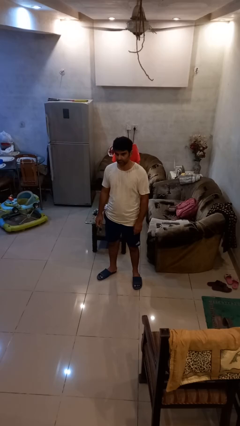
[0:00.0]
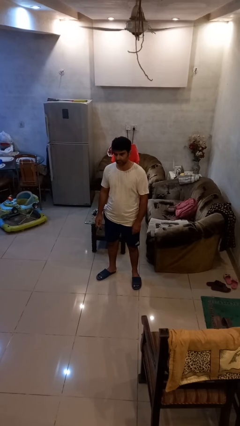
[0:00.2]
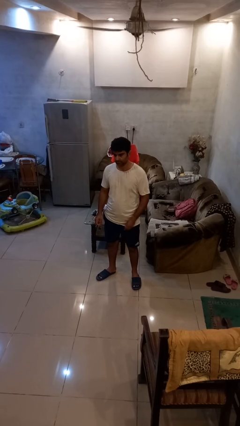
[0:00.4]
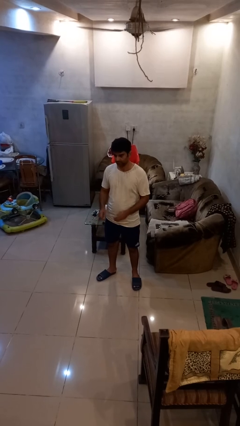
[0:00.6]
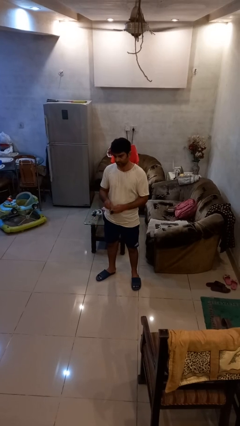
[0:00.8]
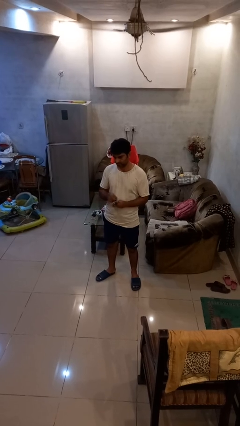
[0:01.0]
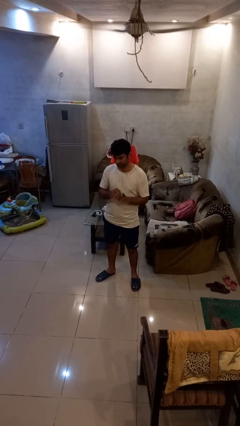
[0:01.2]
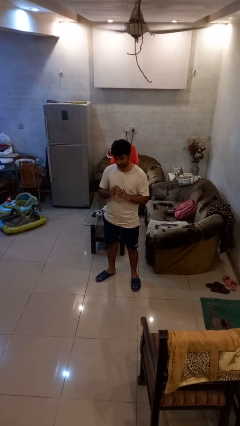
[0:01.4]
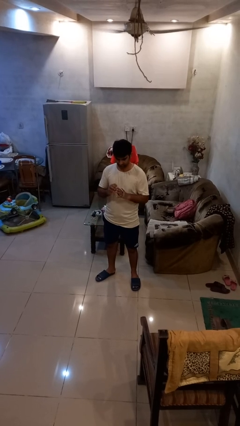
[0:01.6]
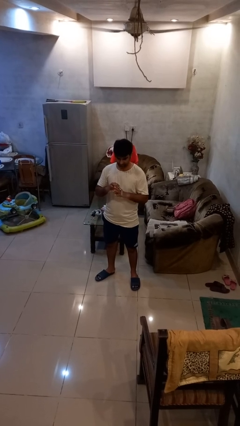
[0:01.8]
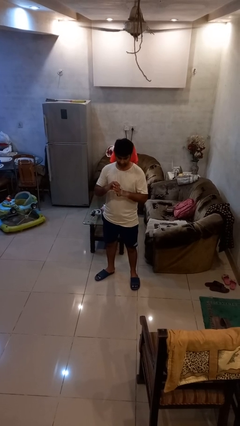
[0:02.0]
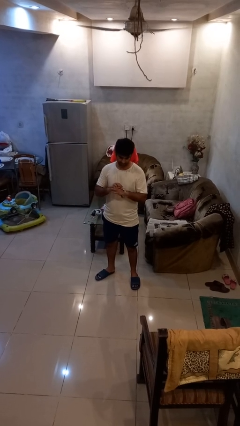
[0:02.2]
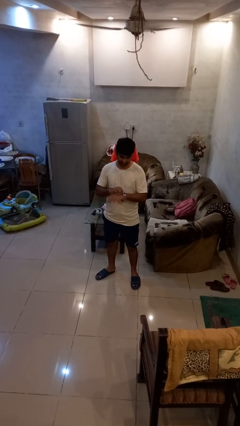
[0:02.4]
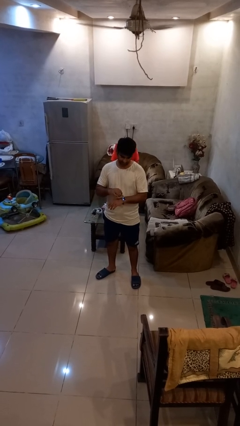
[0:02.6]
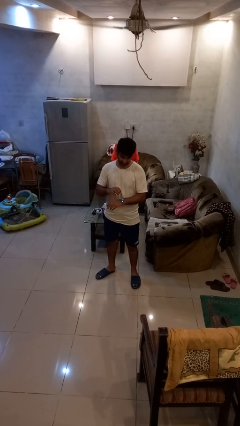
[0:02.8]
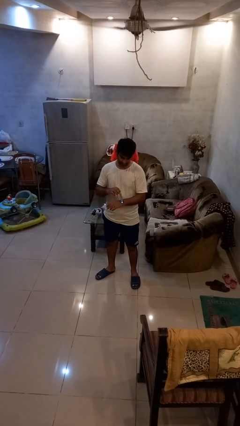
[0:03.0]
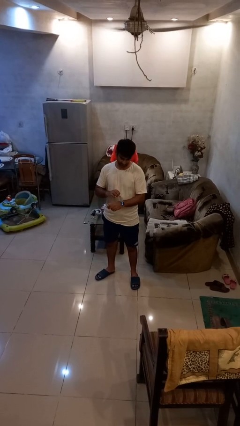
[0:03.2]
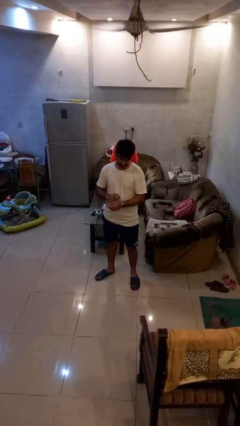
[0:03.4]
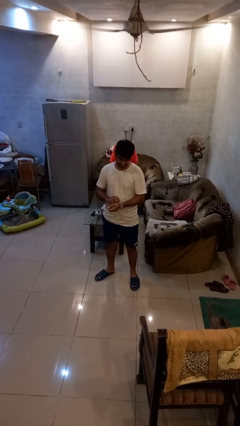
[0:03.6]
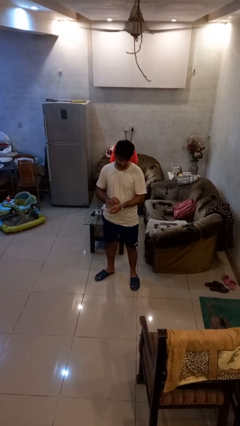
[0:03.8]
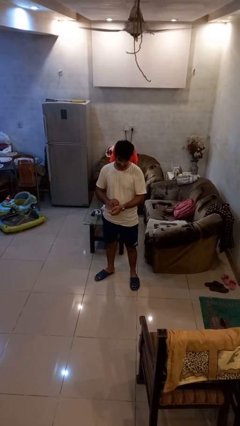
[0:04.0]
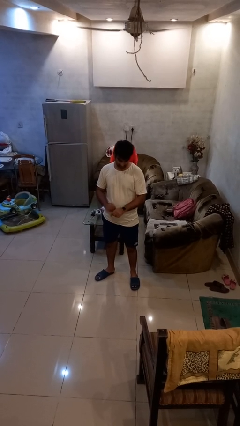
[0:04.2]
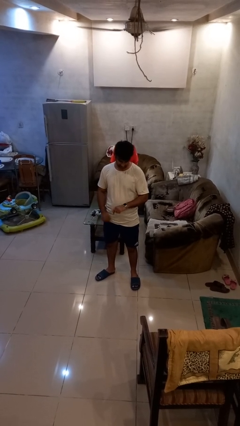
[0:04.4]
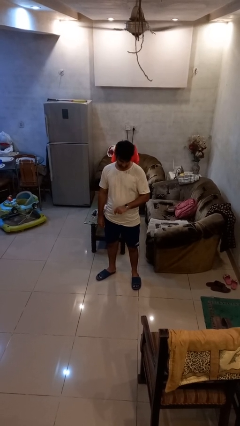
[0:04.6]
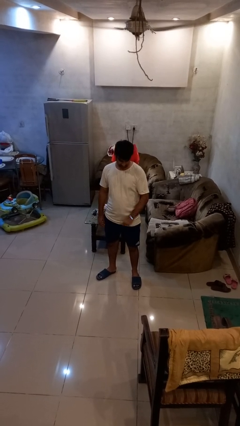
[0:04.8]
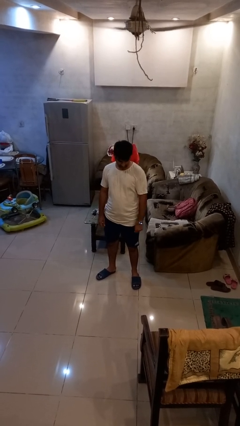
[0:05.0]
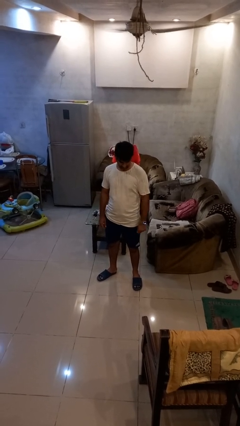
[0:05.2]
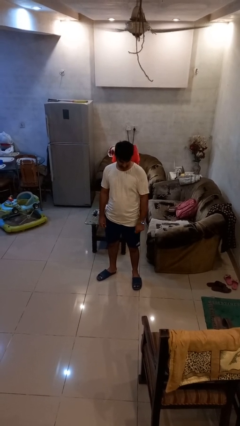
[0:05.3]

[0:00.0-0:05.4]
person puts on wristwatch

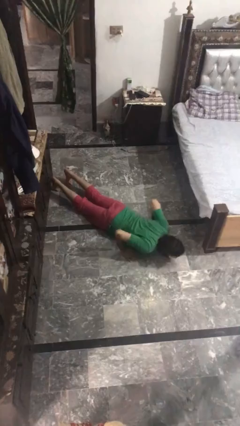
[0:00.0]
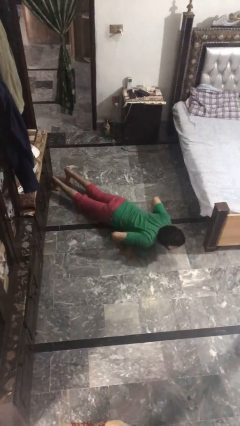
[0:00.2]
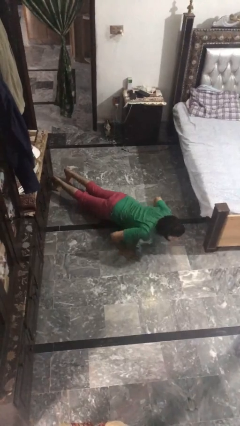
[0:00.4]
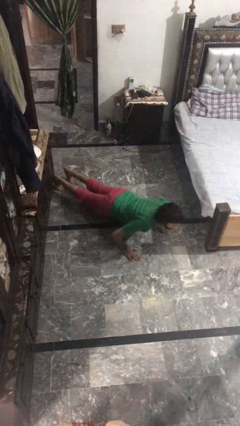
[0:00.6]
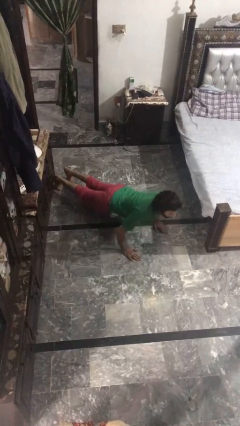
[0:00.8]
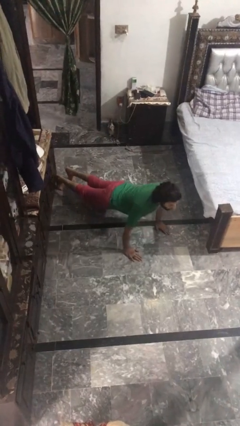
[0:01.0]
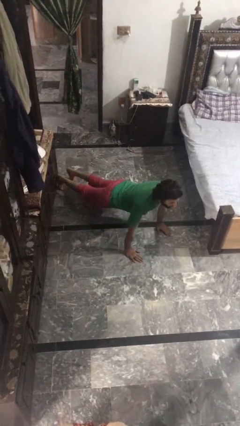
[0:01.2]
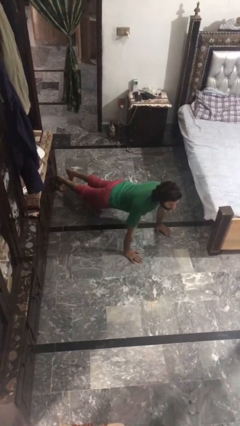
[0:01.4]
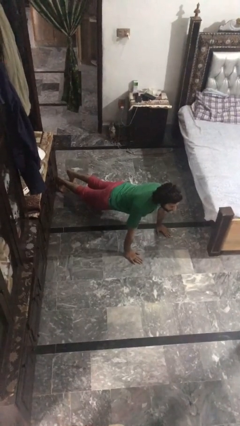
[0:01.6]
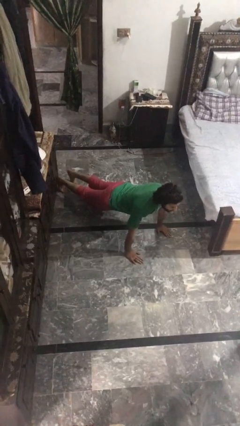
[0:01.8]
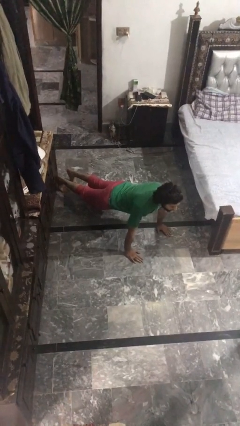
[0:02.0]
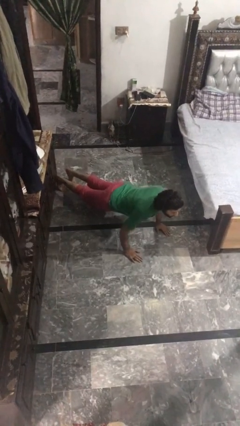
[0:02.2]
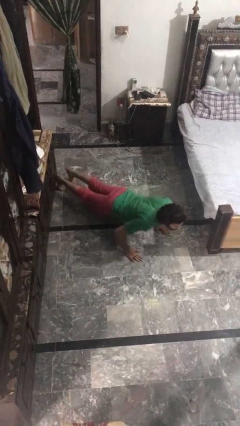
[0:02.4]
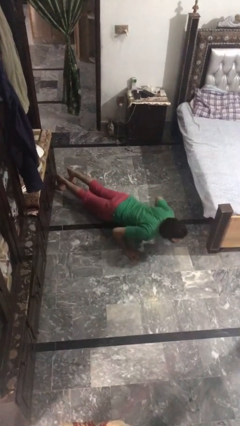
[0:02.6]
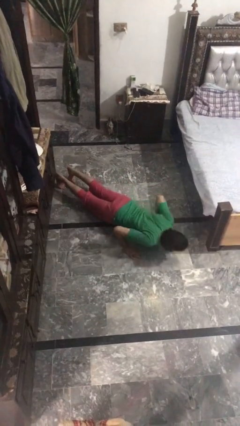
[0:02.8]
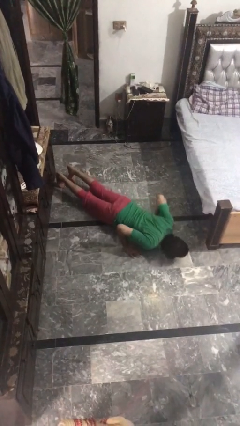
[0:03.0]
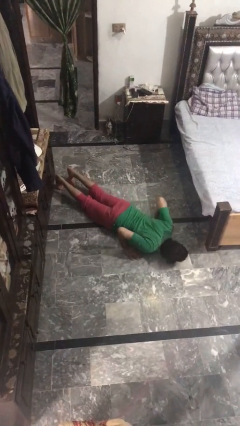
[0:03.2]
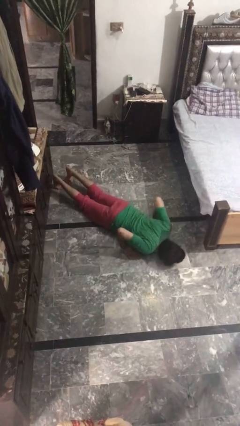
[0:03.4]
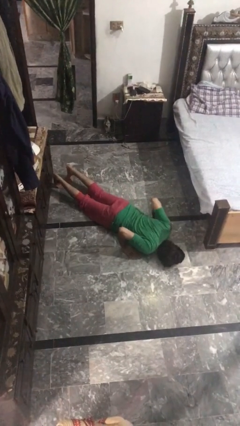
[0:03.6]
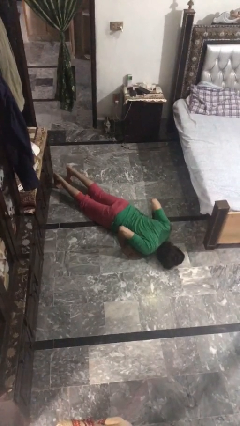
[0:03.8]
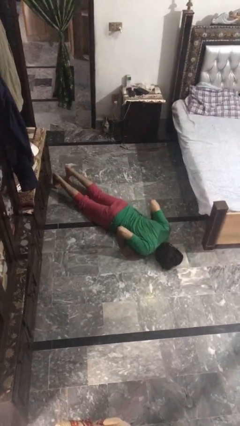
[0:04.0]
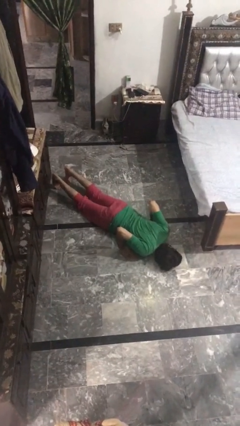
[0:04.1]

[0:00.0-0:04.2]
person exercises with pushup

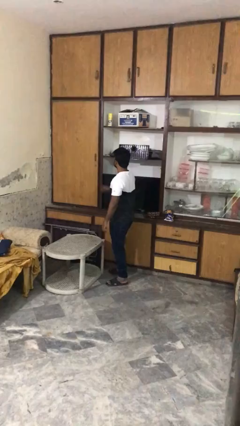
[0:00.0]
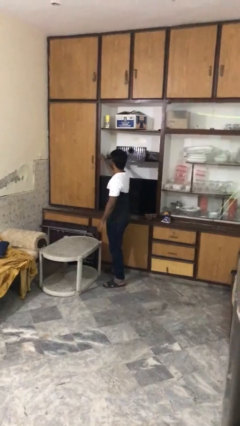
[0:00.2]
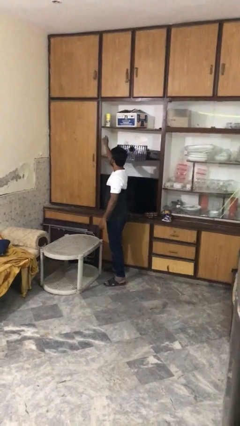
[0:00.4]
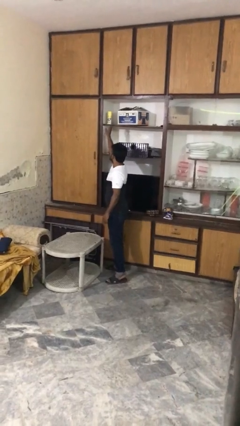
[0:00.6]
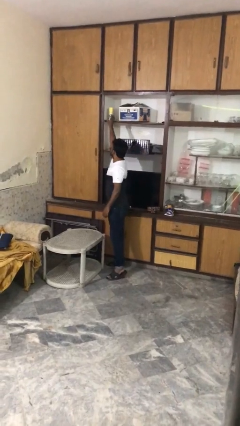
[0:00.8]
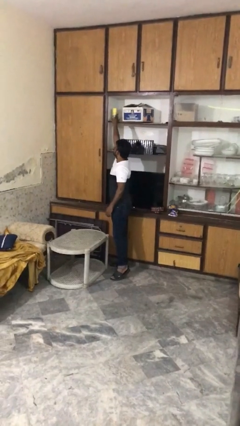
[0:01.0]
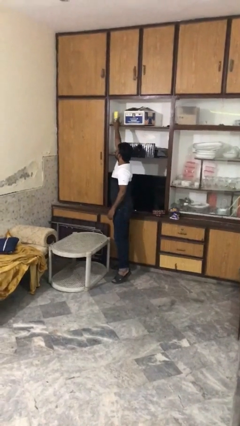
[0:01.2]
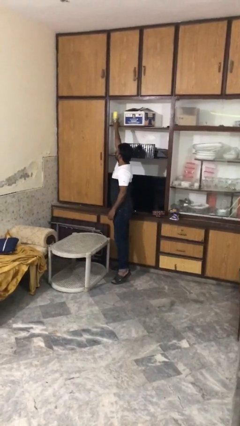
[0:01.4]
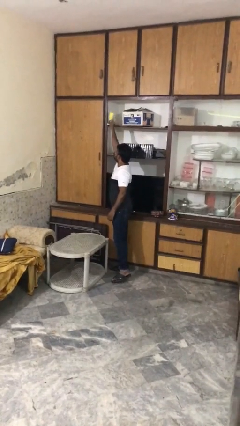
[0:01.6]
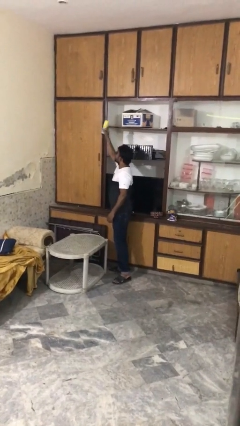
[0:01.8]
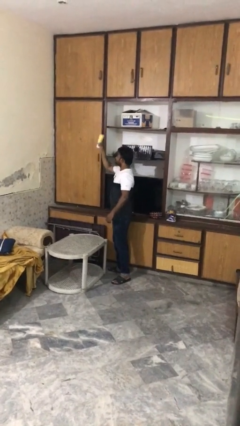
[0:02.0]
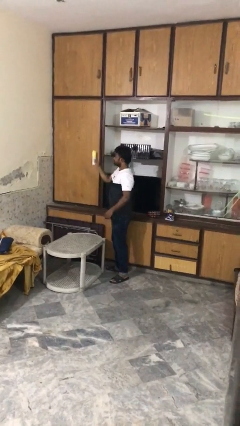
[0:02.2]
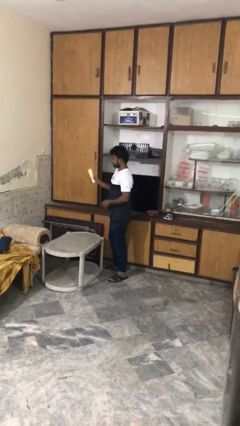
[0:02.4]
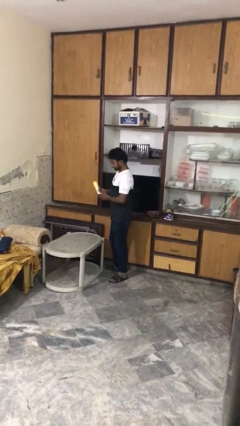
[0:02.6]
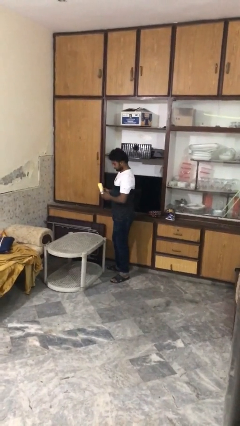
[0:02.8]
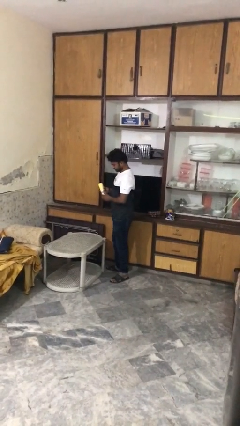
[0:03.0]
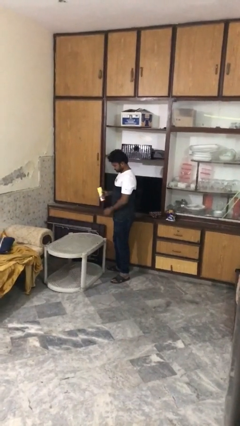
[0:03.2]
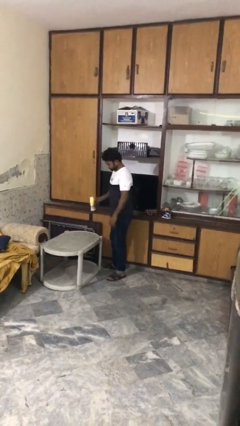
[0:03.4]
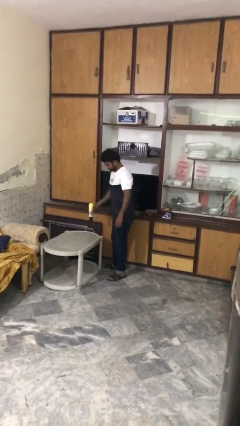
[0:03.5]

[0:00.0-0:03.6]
person picks up object from shelf

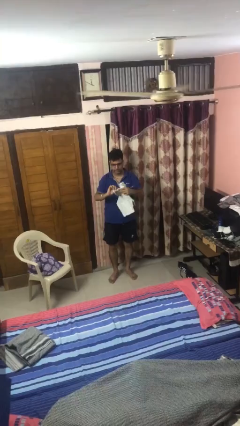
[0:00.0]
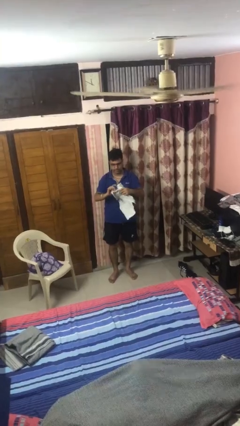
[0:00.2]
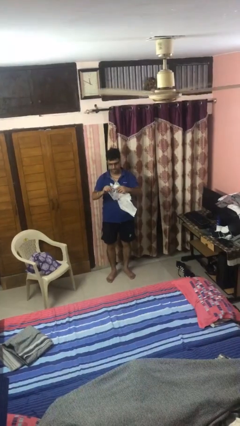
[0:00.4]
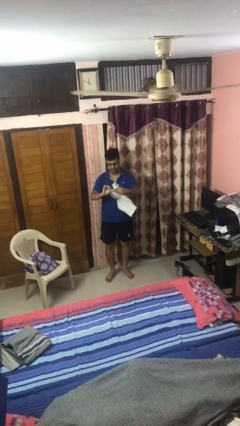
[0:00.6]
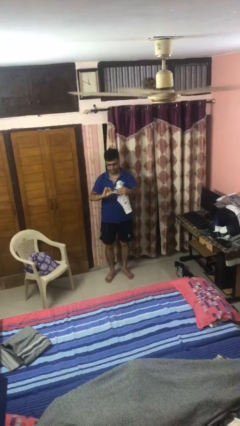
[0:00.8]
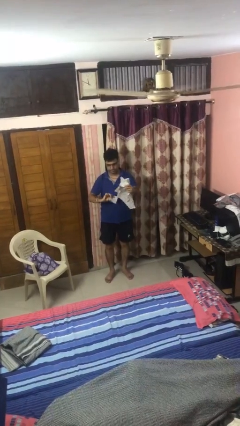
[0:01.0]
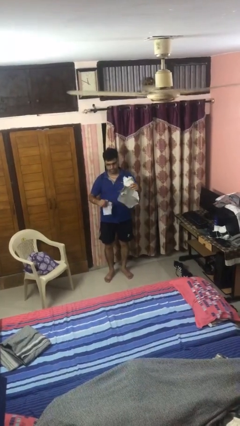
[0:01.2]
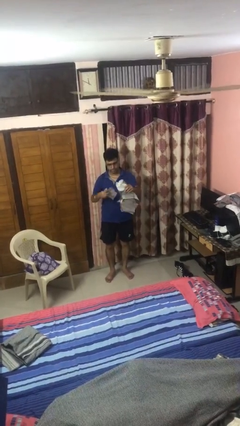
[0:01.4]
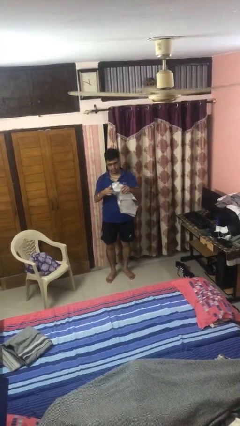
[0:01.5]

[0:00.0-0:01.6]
person tears paper

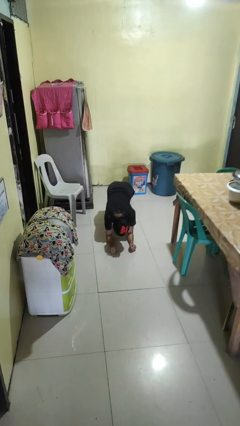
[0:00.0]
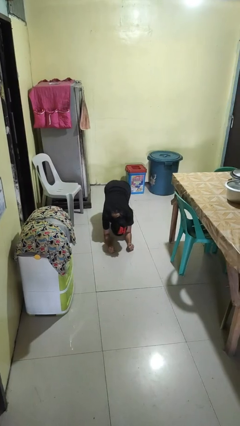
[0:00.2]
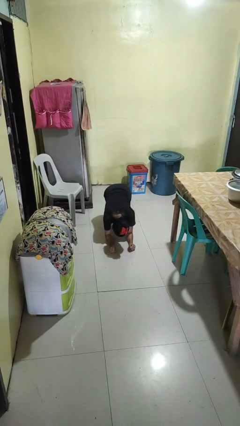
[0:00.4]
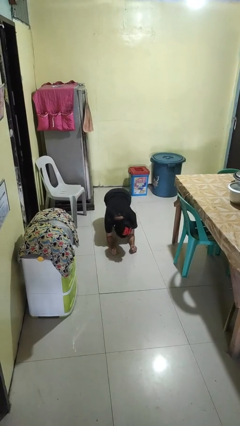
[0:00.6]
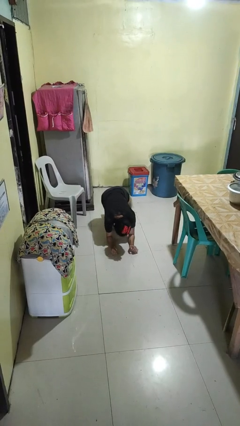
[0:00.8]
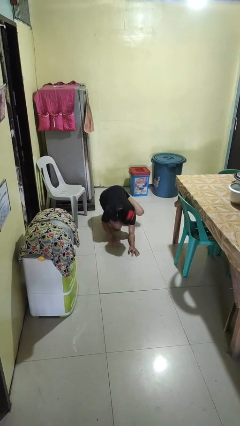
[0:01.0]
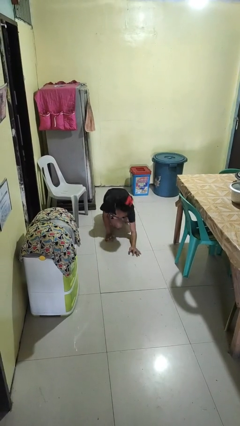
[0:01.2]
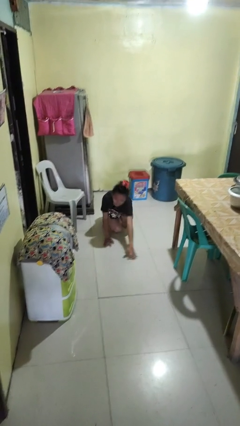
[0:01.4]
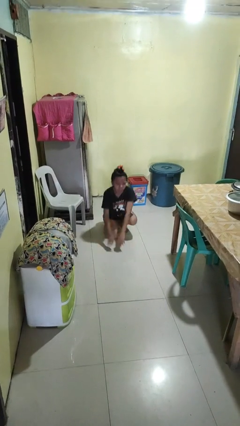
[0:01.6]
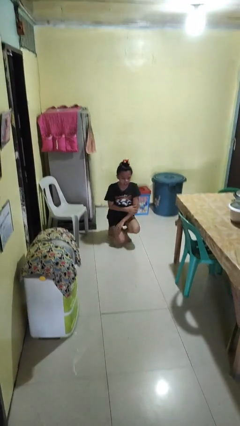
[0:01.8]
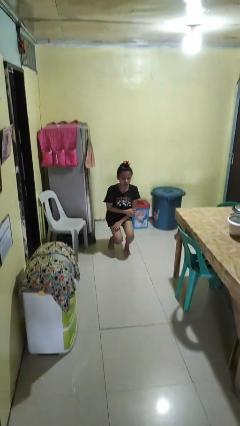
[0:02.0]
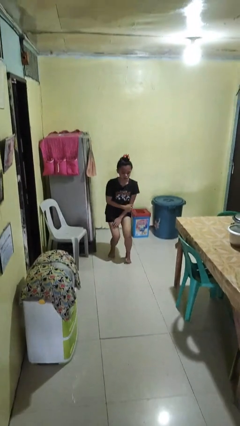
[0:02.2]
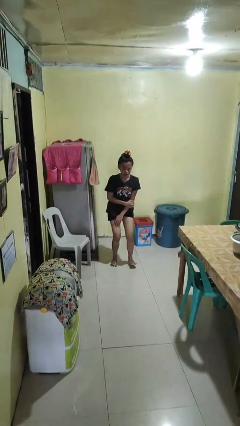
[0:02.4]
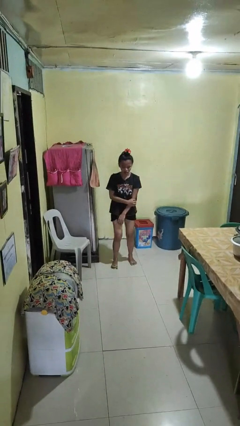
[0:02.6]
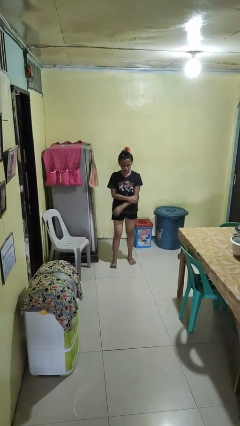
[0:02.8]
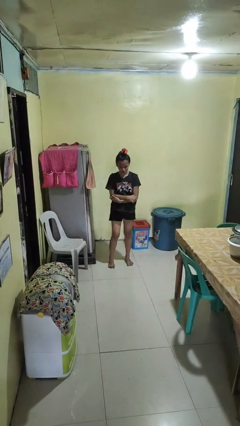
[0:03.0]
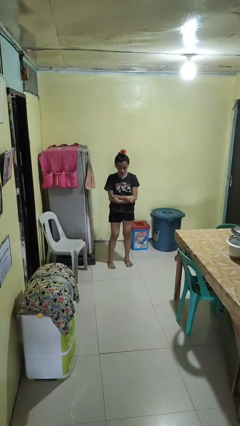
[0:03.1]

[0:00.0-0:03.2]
person stands up from floor
